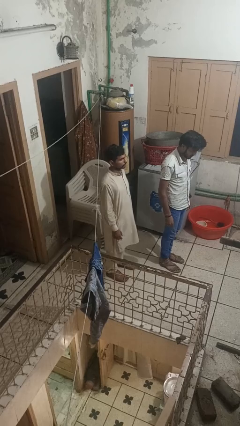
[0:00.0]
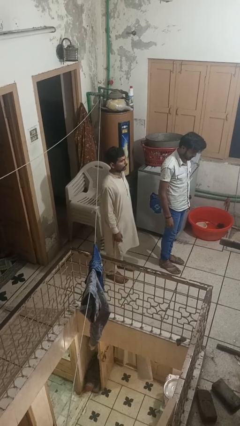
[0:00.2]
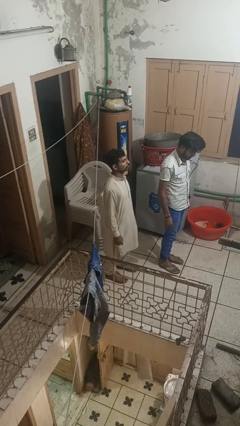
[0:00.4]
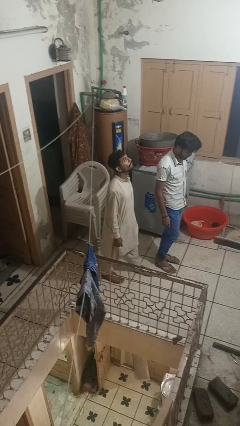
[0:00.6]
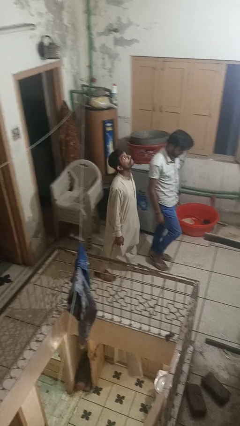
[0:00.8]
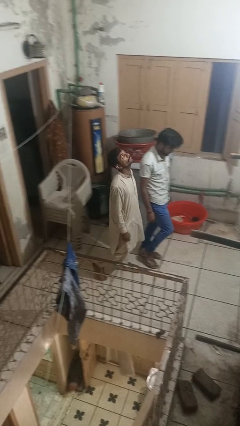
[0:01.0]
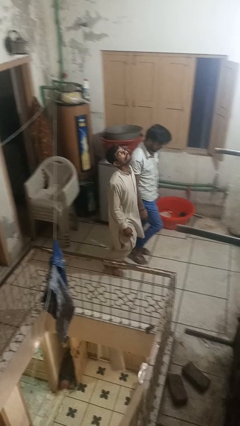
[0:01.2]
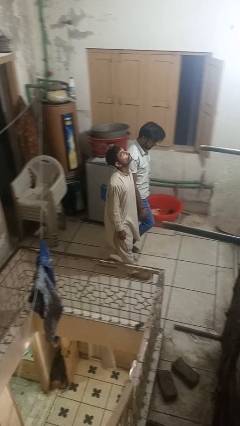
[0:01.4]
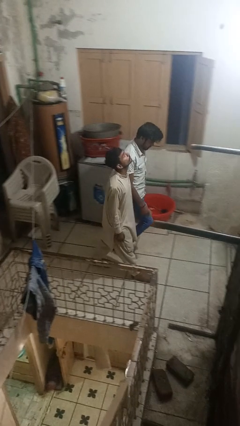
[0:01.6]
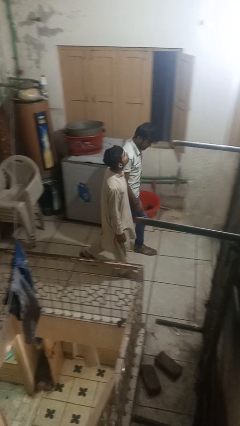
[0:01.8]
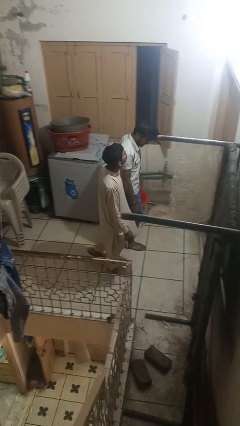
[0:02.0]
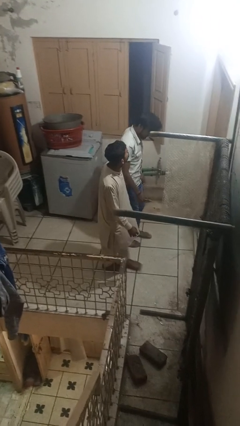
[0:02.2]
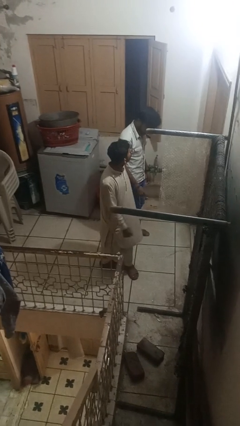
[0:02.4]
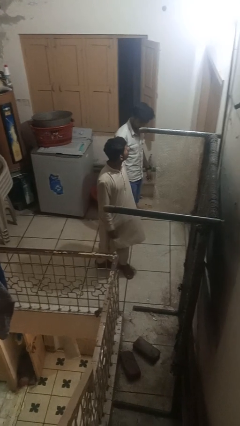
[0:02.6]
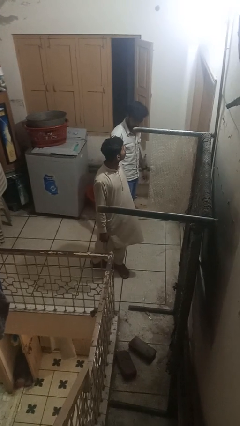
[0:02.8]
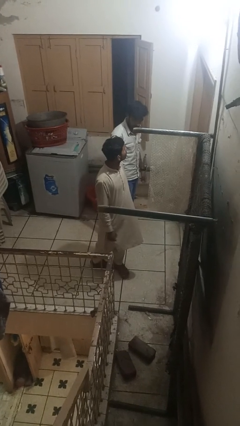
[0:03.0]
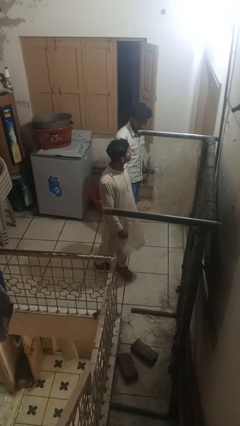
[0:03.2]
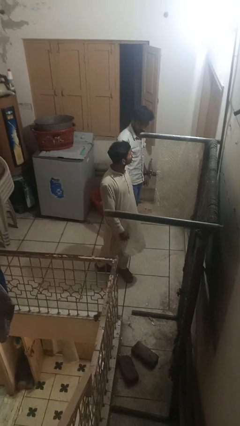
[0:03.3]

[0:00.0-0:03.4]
person bumps into person

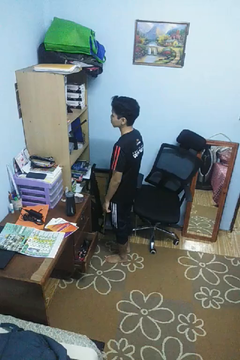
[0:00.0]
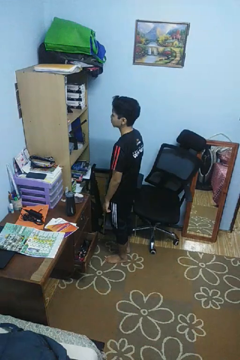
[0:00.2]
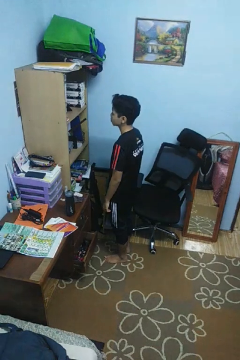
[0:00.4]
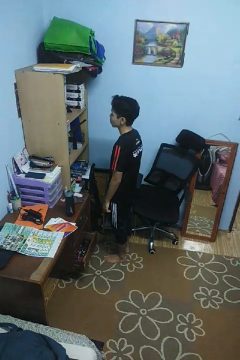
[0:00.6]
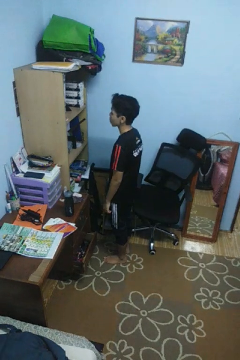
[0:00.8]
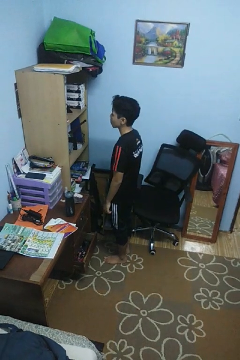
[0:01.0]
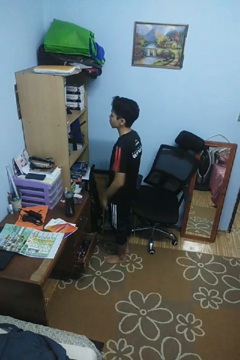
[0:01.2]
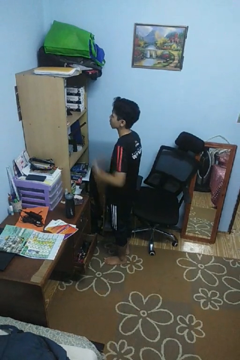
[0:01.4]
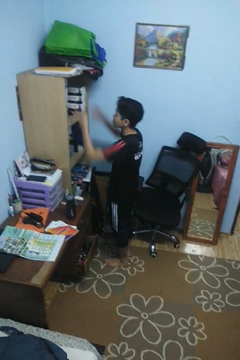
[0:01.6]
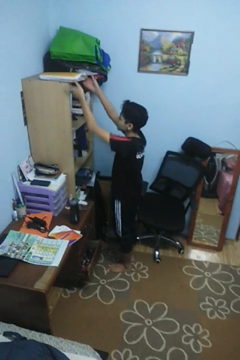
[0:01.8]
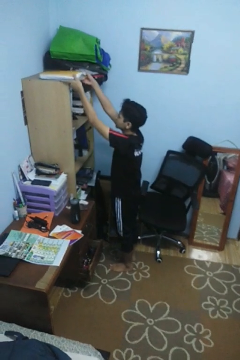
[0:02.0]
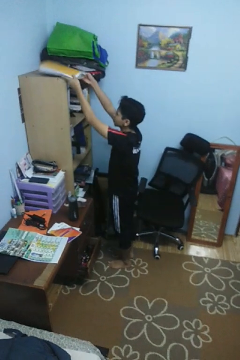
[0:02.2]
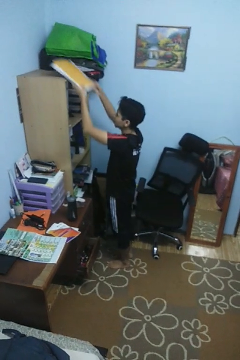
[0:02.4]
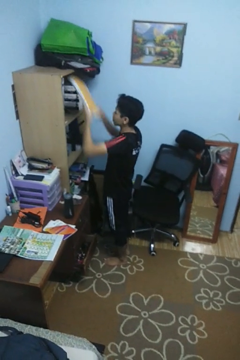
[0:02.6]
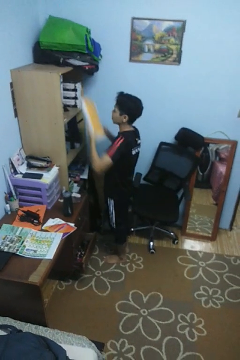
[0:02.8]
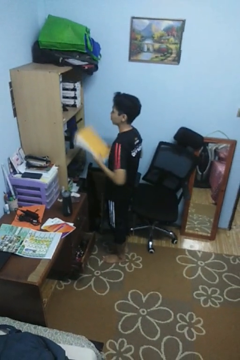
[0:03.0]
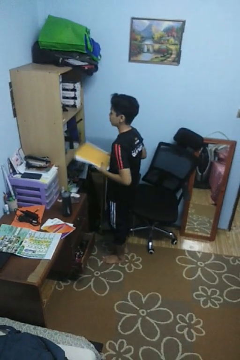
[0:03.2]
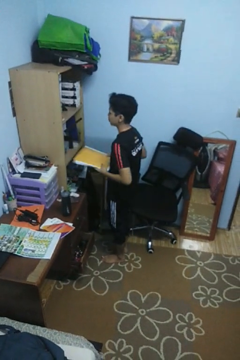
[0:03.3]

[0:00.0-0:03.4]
person picks up object from shelf

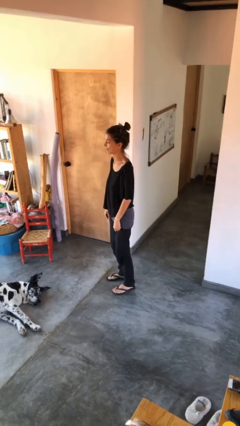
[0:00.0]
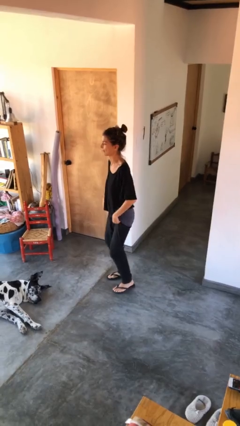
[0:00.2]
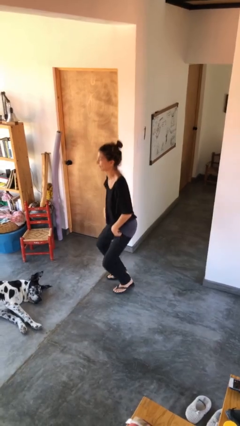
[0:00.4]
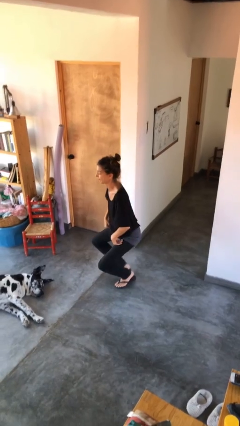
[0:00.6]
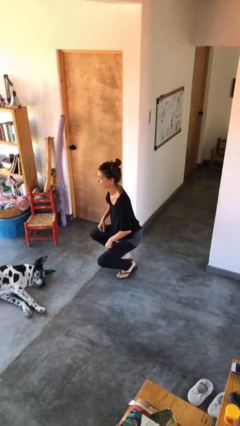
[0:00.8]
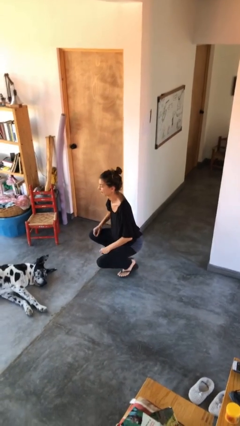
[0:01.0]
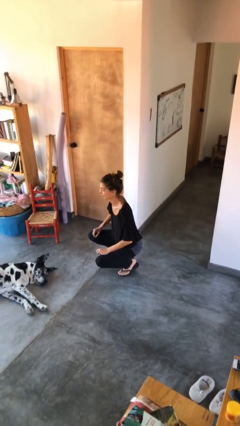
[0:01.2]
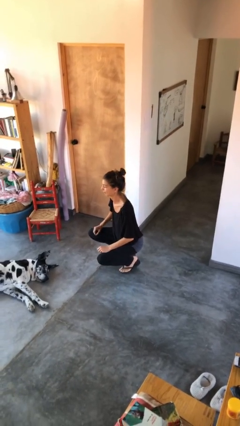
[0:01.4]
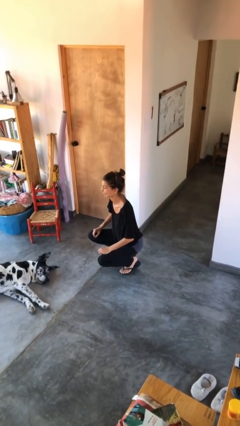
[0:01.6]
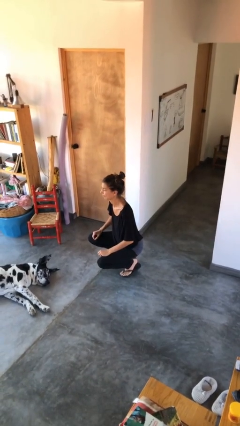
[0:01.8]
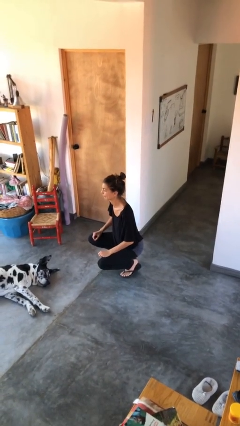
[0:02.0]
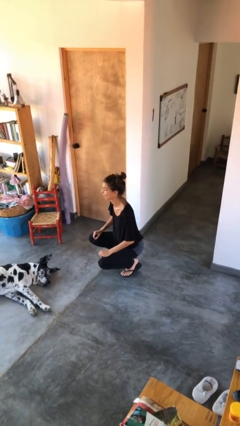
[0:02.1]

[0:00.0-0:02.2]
person squats

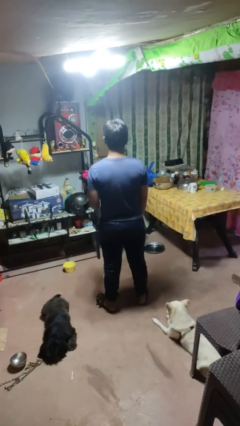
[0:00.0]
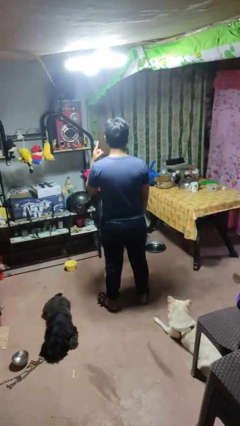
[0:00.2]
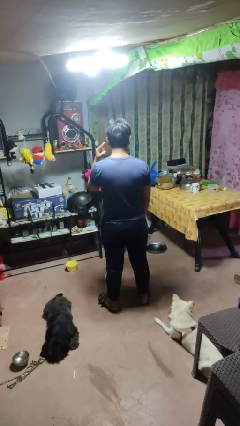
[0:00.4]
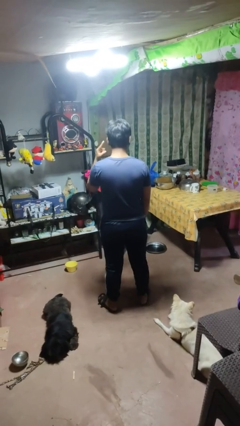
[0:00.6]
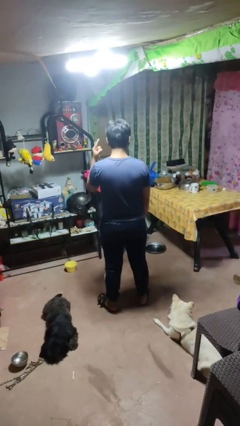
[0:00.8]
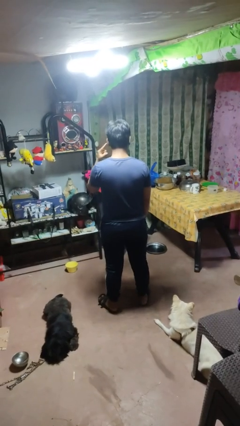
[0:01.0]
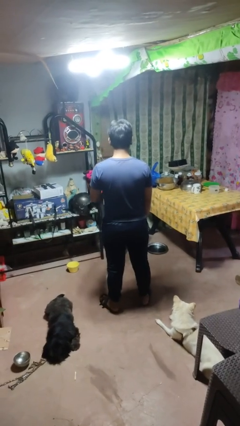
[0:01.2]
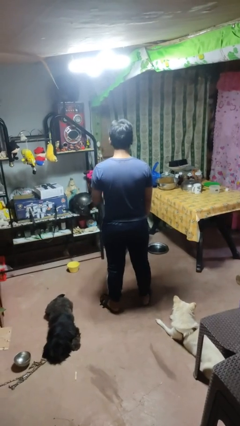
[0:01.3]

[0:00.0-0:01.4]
person gestures listen closely

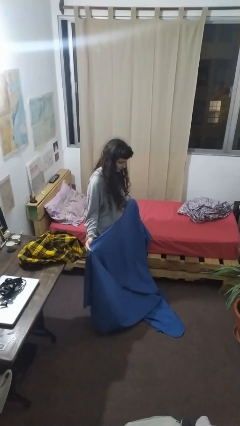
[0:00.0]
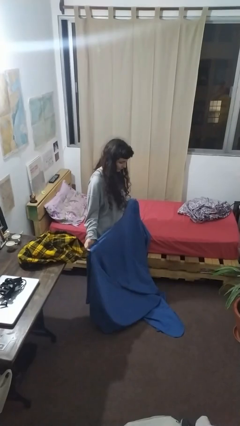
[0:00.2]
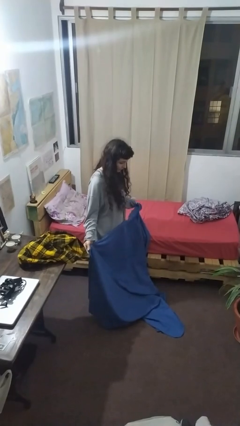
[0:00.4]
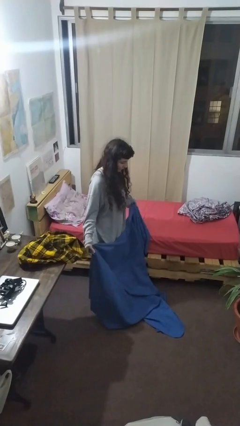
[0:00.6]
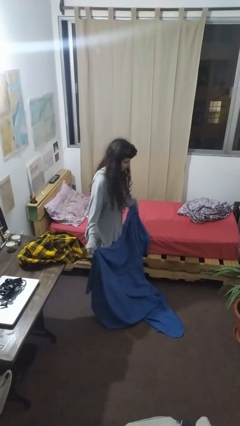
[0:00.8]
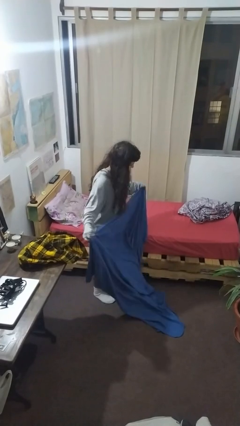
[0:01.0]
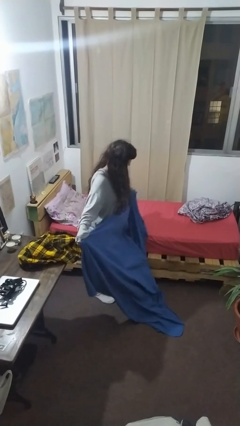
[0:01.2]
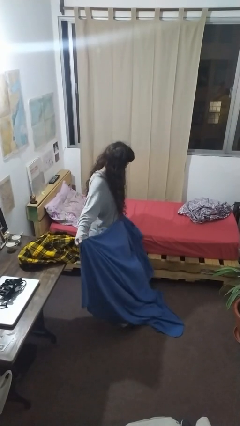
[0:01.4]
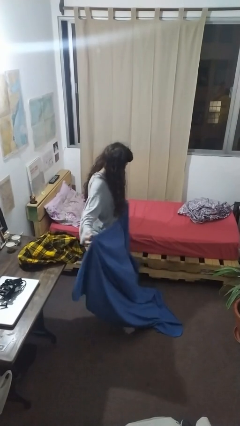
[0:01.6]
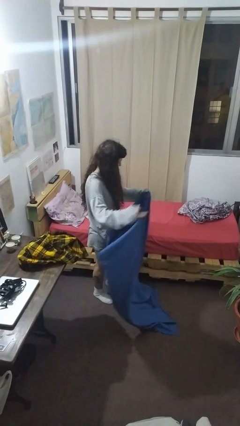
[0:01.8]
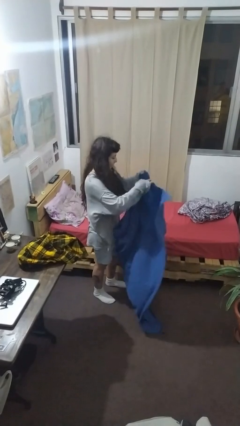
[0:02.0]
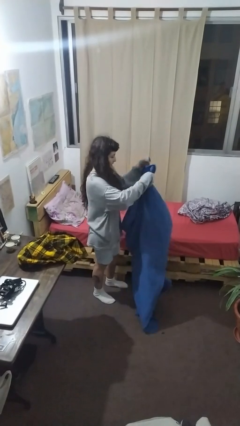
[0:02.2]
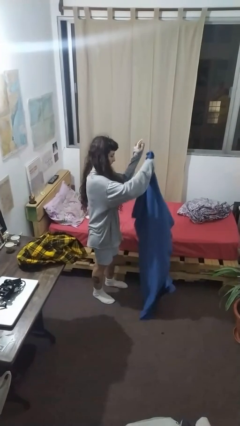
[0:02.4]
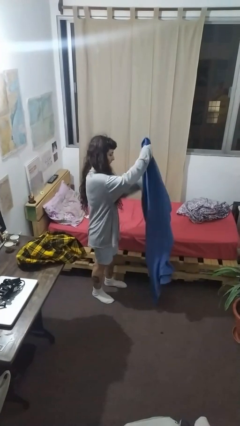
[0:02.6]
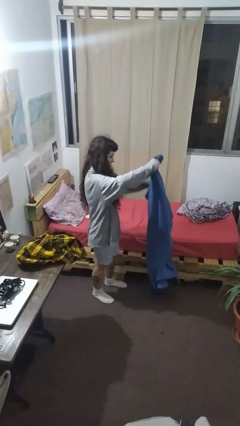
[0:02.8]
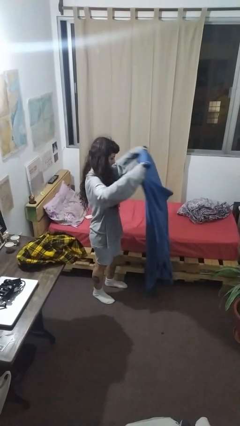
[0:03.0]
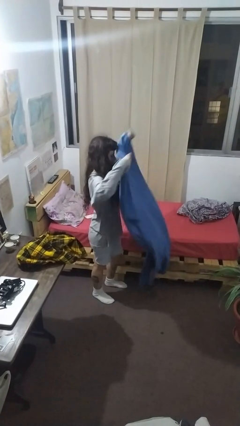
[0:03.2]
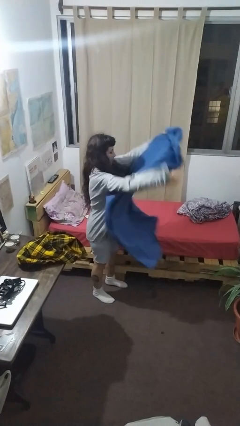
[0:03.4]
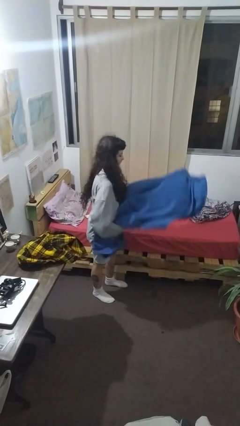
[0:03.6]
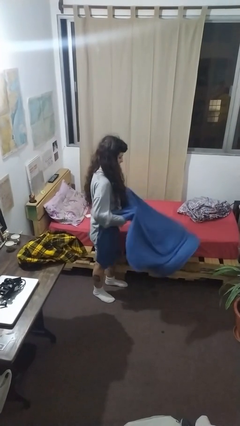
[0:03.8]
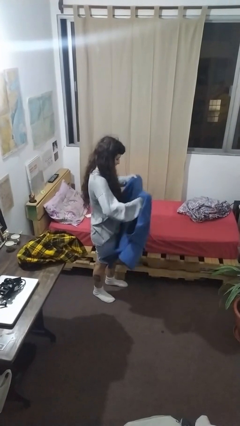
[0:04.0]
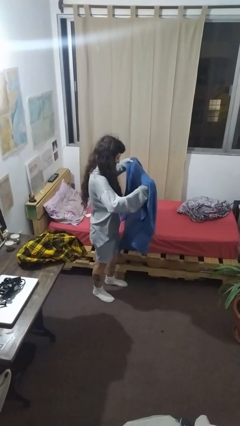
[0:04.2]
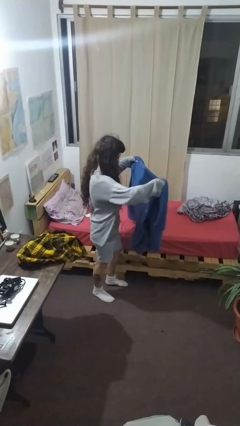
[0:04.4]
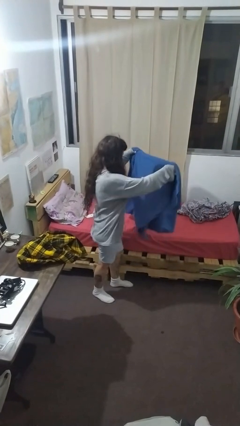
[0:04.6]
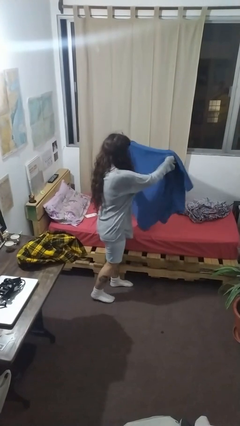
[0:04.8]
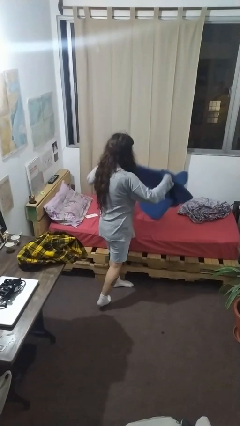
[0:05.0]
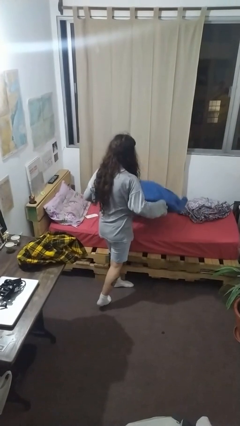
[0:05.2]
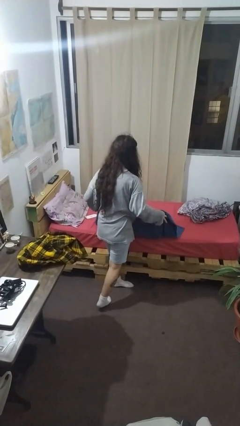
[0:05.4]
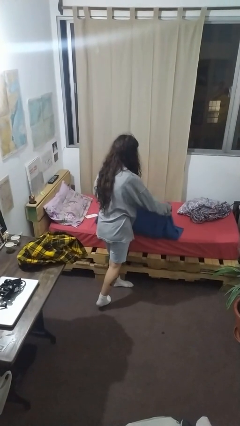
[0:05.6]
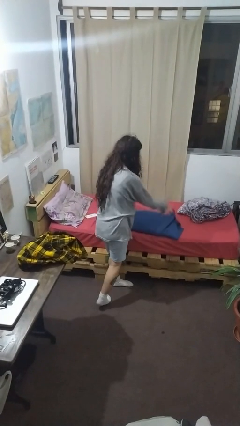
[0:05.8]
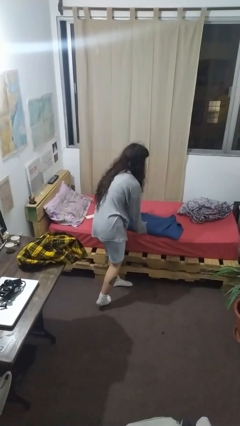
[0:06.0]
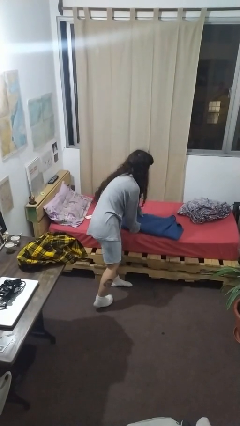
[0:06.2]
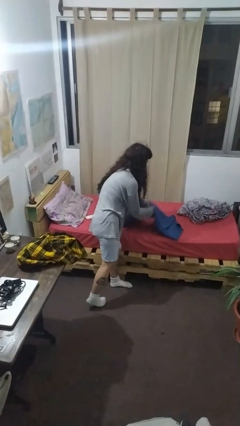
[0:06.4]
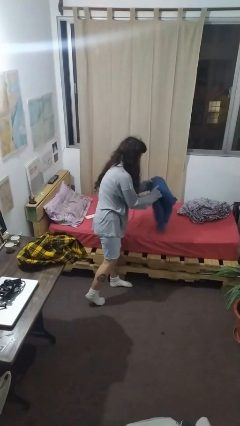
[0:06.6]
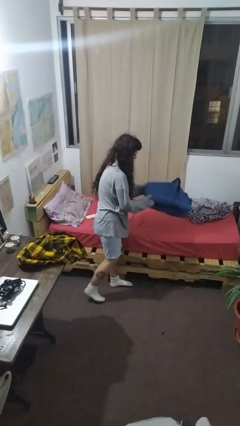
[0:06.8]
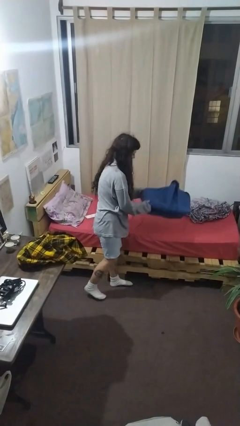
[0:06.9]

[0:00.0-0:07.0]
person folds blanket

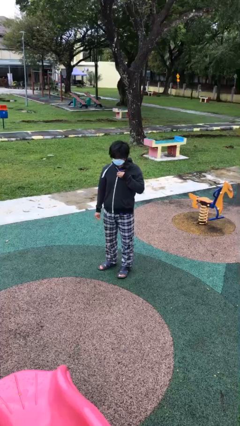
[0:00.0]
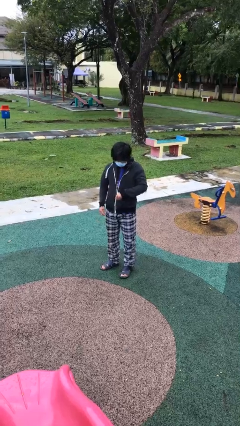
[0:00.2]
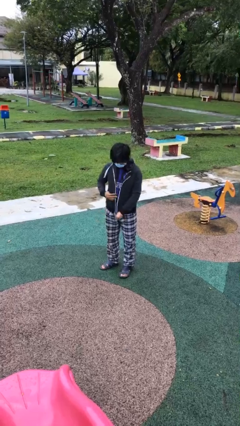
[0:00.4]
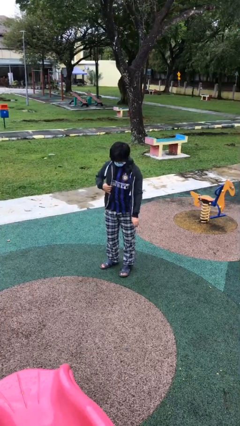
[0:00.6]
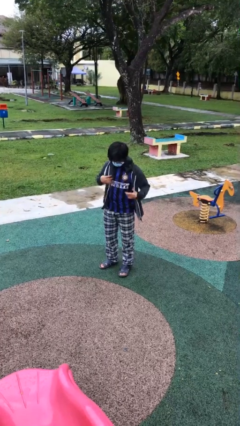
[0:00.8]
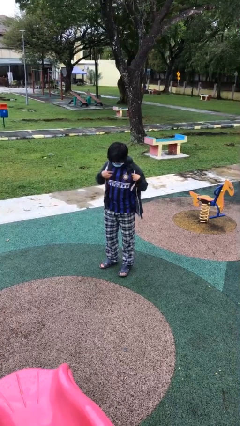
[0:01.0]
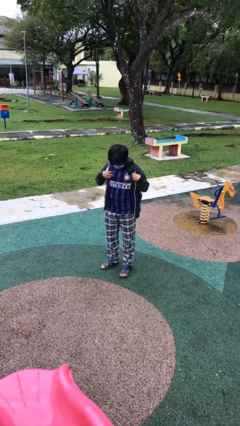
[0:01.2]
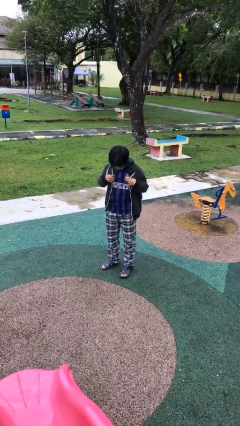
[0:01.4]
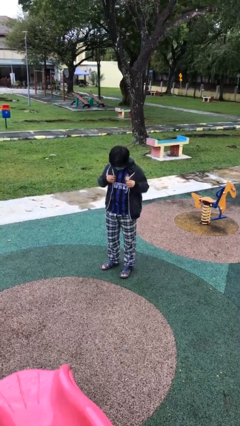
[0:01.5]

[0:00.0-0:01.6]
person unzips jacket
